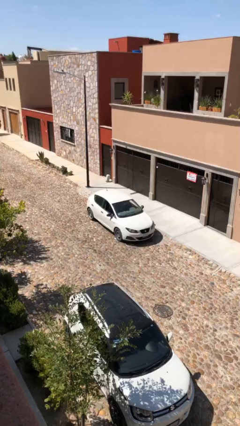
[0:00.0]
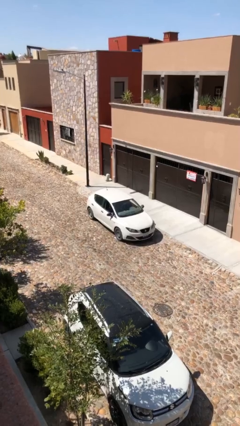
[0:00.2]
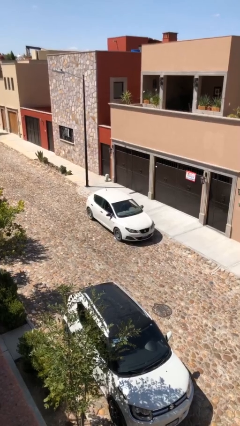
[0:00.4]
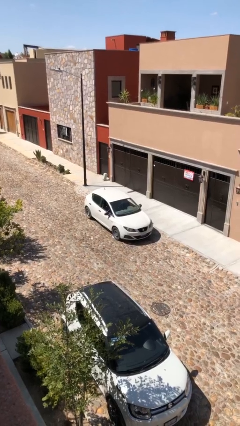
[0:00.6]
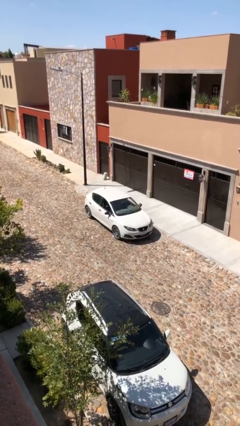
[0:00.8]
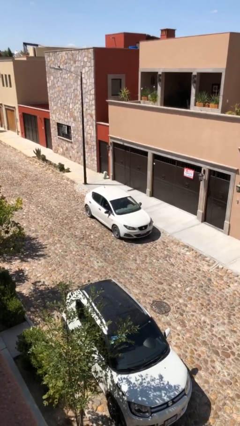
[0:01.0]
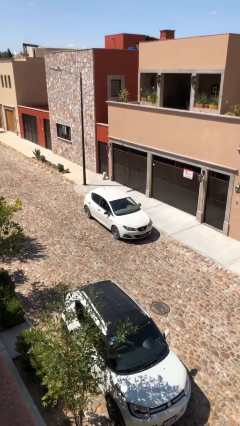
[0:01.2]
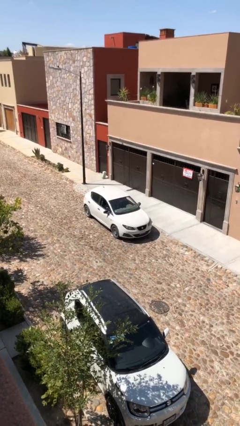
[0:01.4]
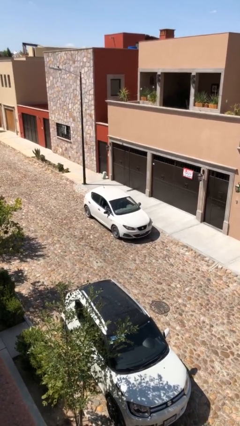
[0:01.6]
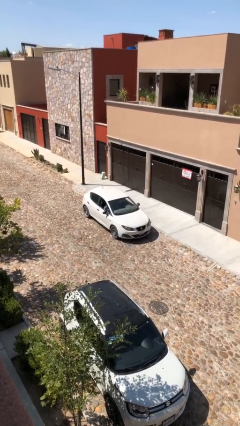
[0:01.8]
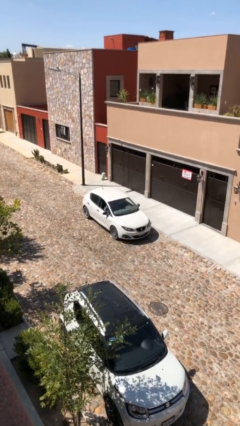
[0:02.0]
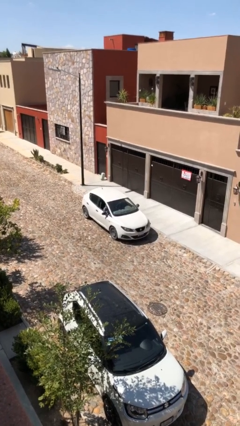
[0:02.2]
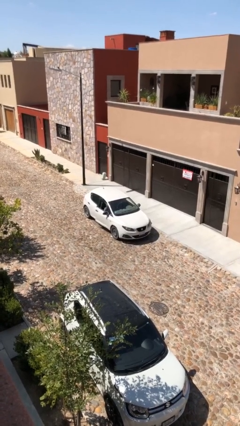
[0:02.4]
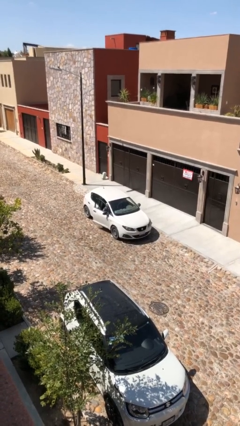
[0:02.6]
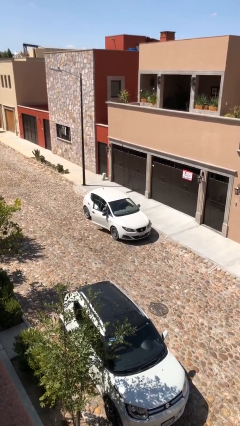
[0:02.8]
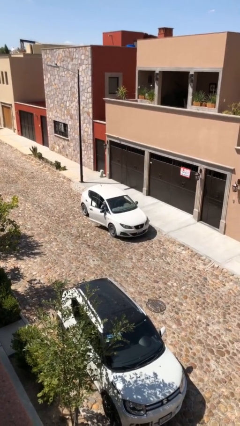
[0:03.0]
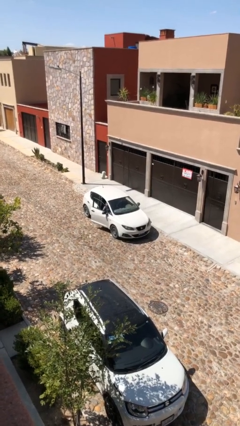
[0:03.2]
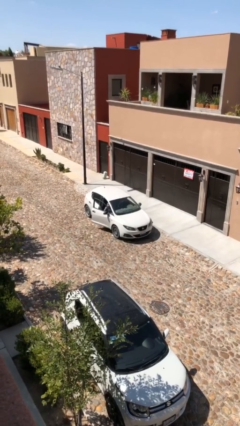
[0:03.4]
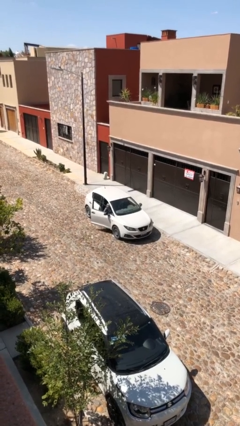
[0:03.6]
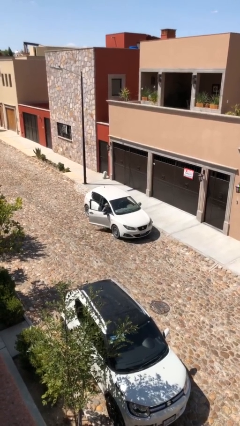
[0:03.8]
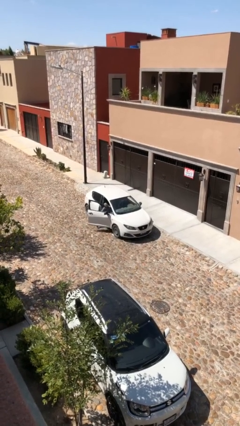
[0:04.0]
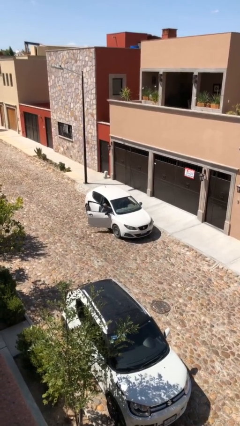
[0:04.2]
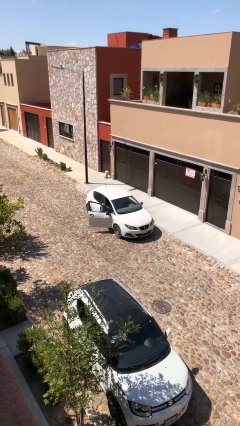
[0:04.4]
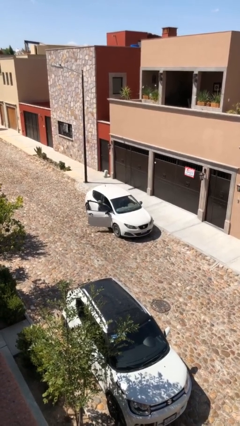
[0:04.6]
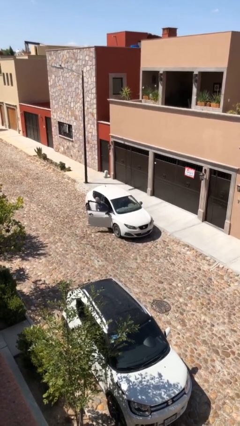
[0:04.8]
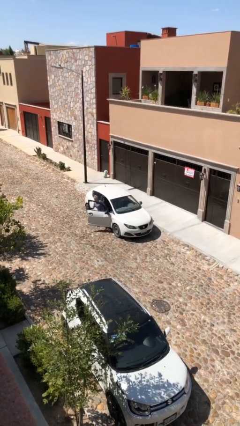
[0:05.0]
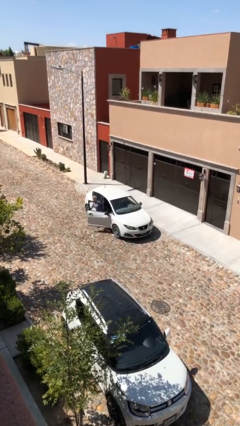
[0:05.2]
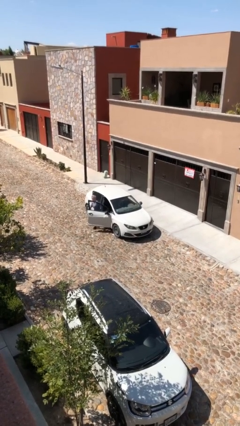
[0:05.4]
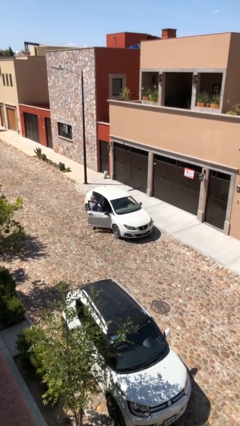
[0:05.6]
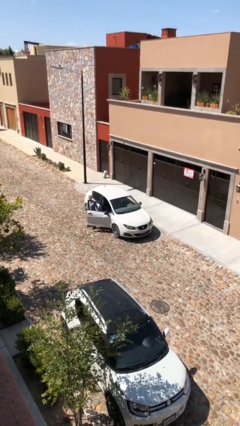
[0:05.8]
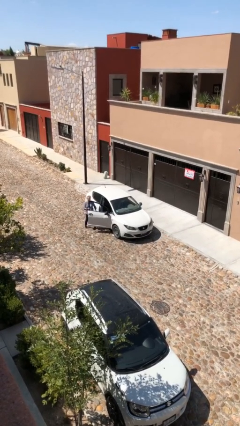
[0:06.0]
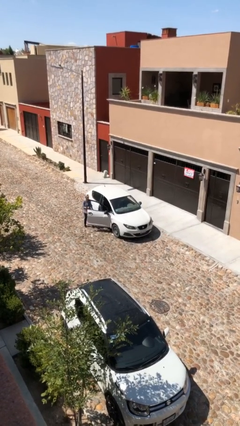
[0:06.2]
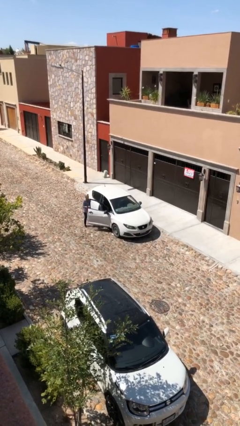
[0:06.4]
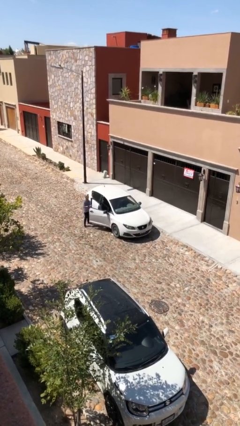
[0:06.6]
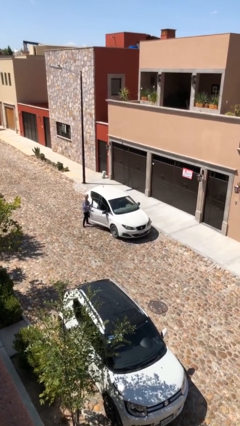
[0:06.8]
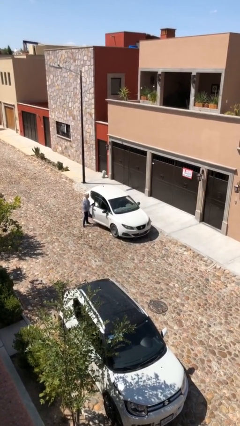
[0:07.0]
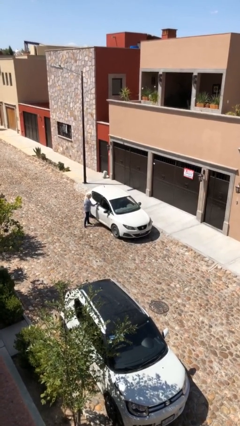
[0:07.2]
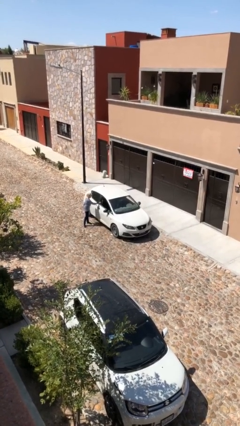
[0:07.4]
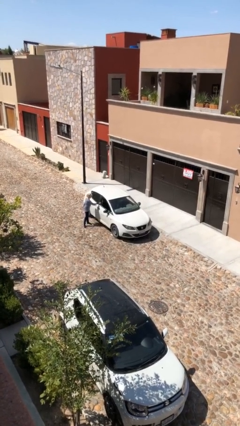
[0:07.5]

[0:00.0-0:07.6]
car drops off person

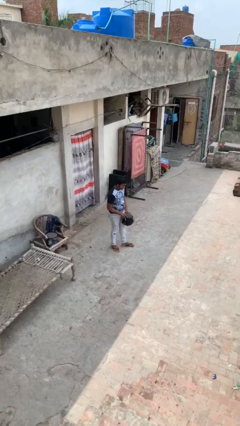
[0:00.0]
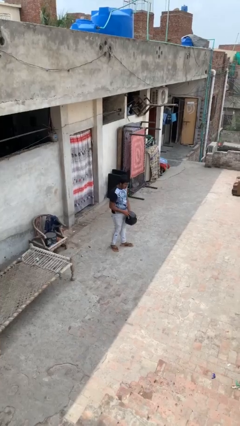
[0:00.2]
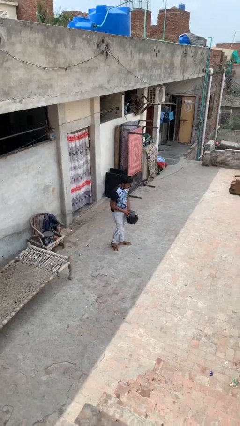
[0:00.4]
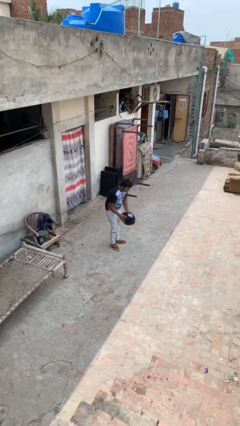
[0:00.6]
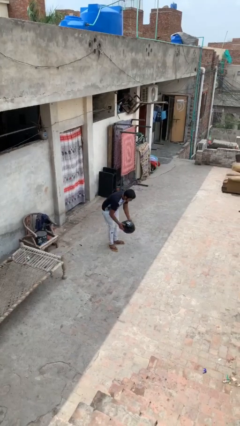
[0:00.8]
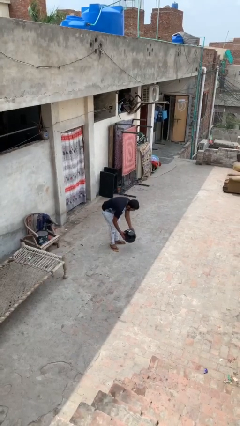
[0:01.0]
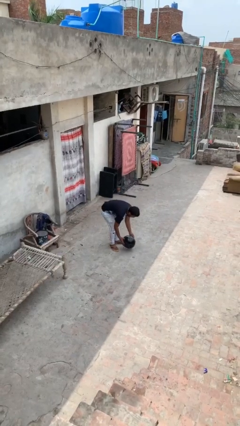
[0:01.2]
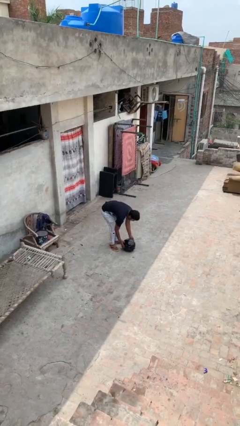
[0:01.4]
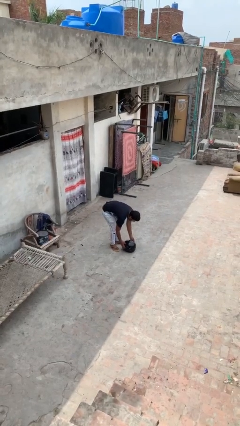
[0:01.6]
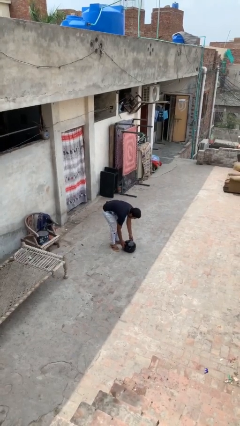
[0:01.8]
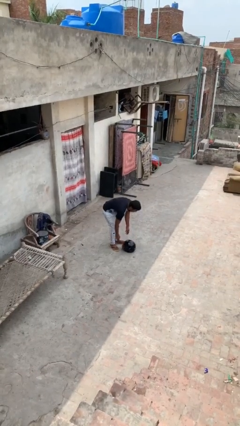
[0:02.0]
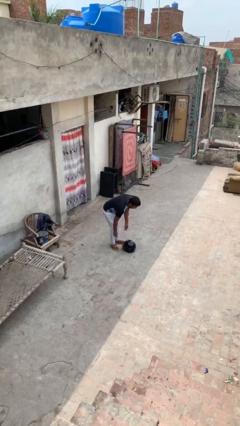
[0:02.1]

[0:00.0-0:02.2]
person puts down object on floor

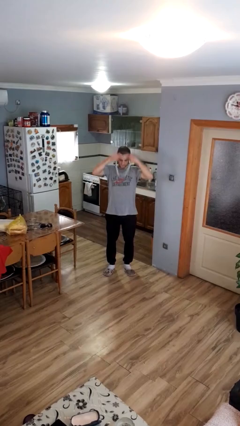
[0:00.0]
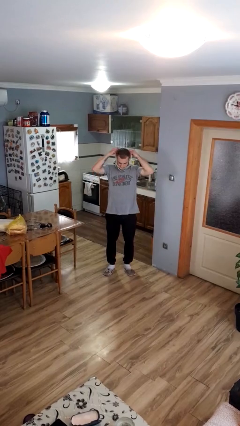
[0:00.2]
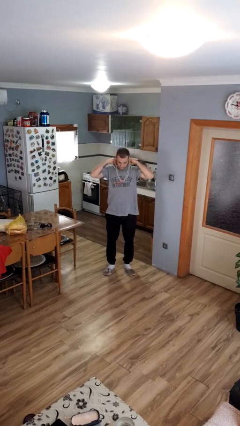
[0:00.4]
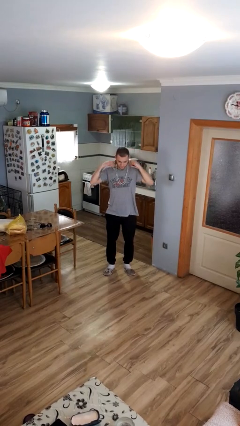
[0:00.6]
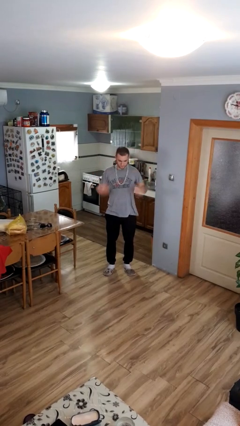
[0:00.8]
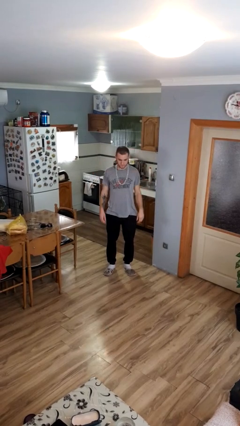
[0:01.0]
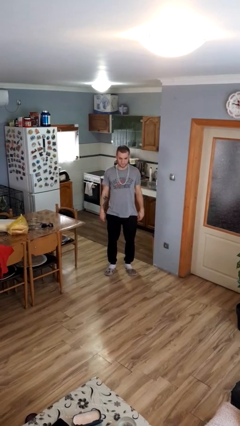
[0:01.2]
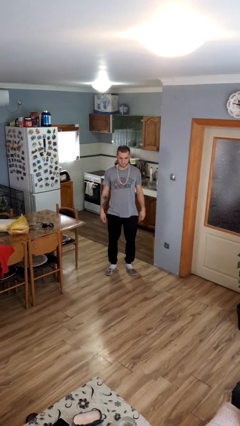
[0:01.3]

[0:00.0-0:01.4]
person puts on necklace

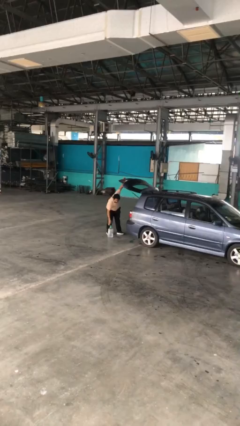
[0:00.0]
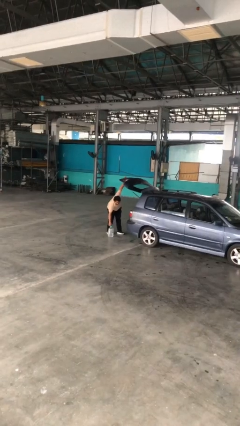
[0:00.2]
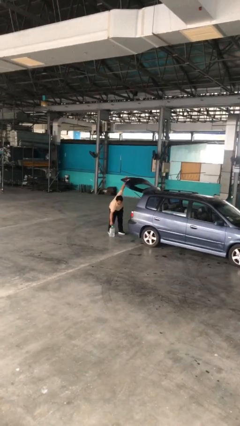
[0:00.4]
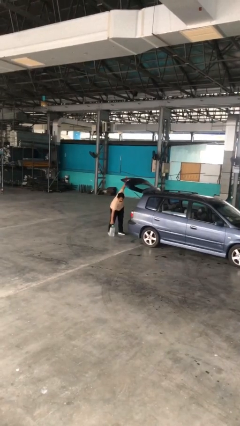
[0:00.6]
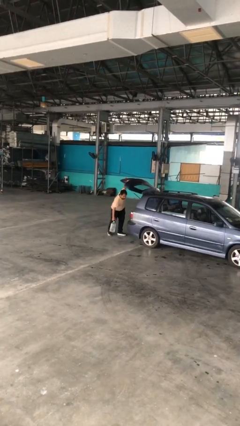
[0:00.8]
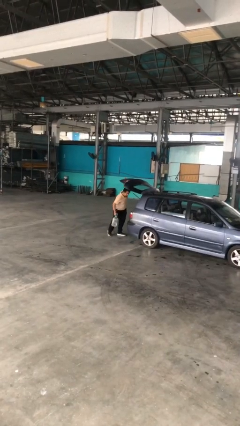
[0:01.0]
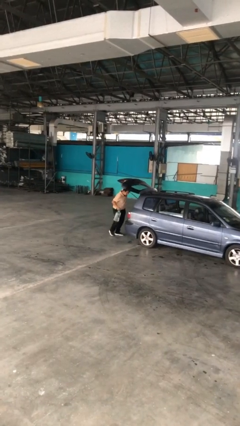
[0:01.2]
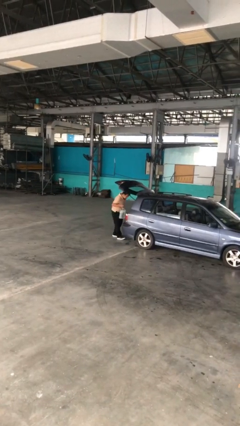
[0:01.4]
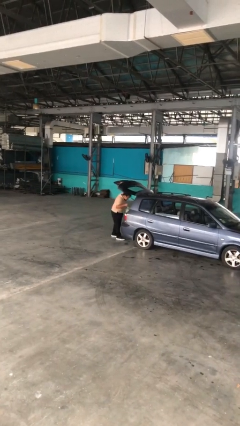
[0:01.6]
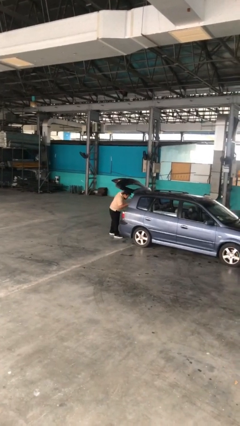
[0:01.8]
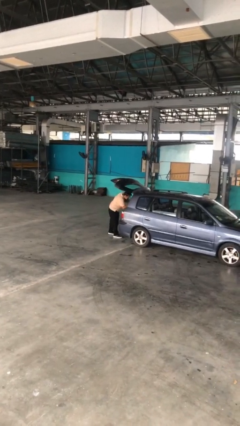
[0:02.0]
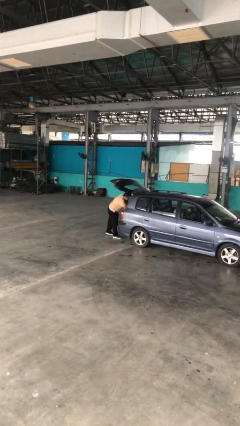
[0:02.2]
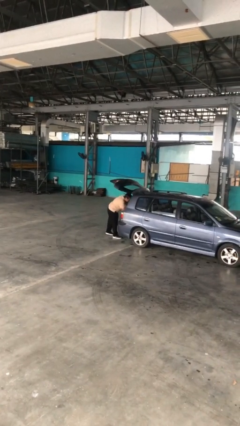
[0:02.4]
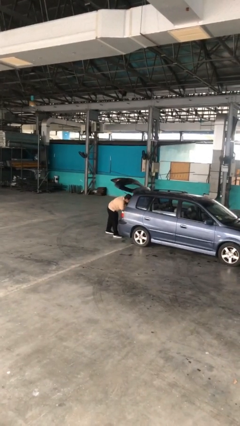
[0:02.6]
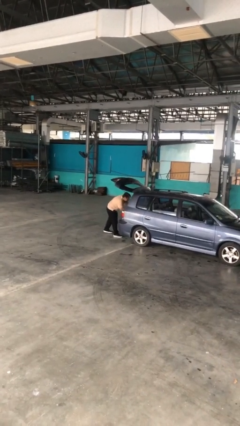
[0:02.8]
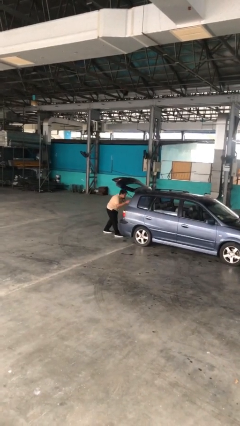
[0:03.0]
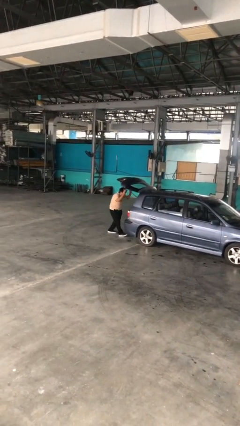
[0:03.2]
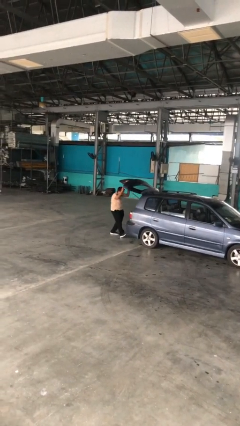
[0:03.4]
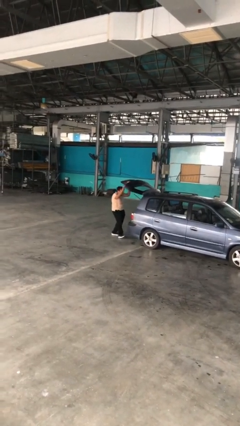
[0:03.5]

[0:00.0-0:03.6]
person loads car

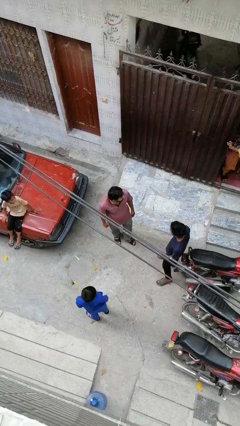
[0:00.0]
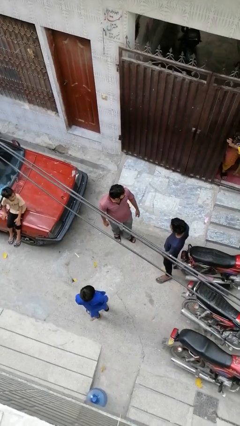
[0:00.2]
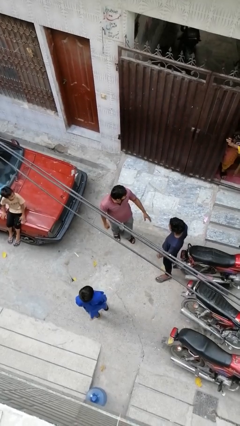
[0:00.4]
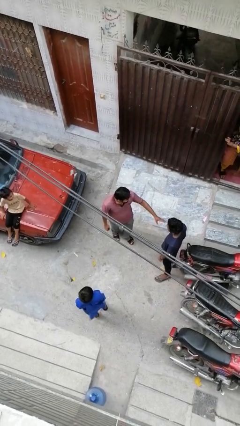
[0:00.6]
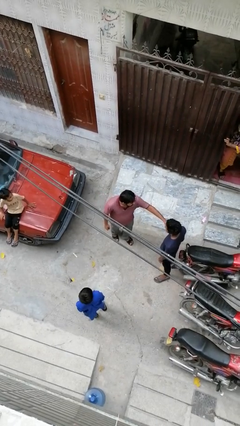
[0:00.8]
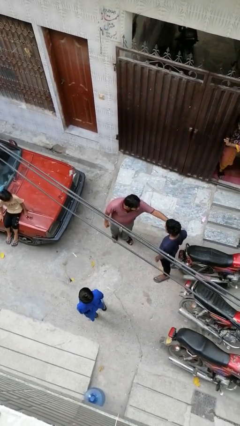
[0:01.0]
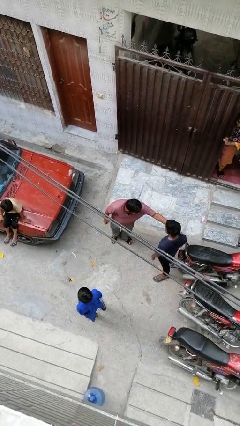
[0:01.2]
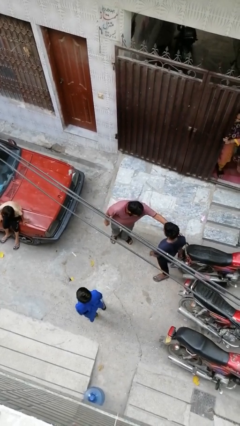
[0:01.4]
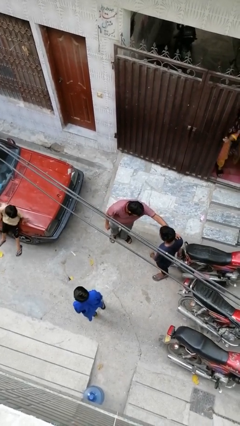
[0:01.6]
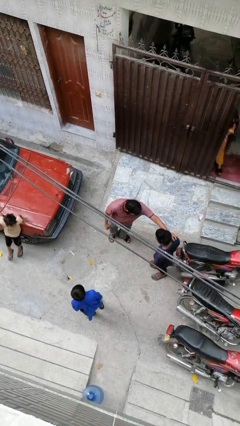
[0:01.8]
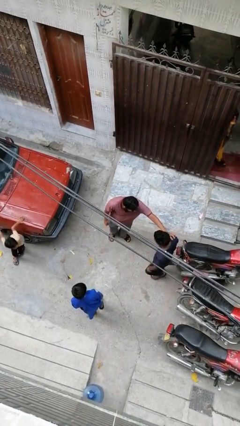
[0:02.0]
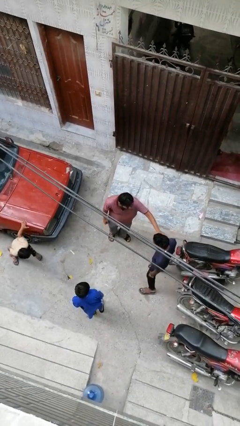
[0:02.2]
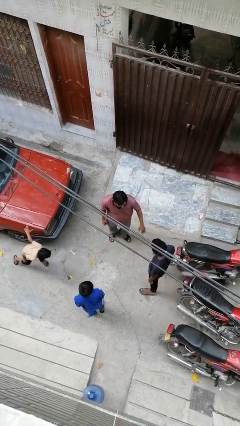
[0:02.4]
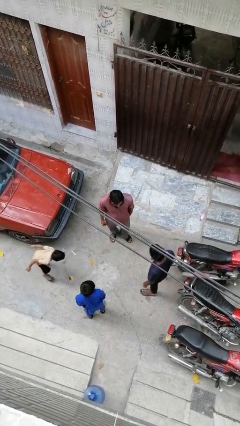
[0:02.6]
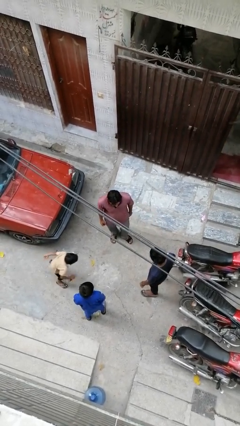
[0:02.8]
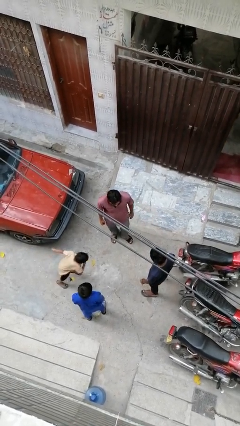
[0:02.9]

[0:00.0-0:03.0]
person shoves person
